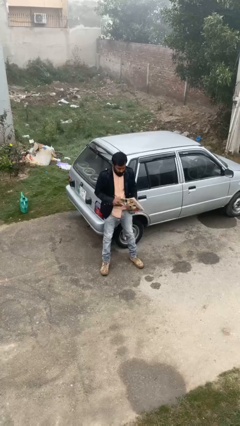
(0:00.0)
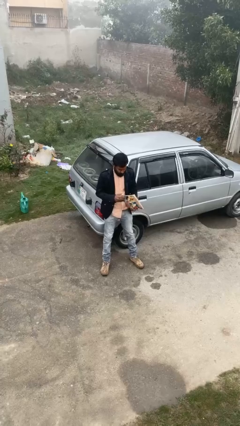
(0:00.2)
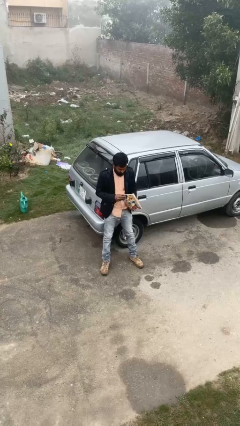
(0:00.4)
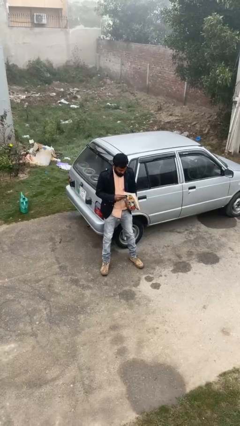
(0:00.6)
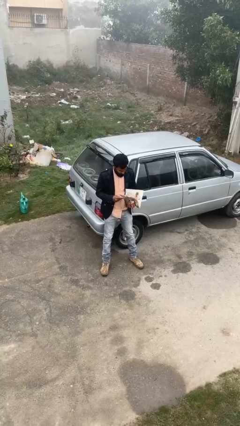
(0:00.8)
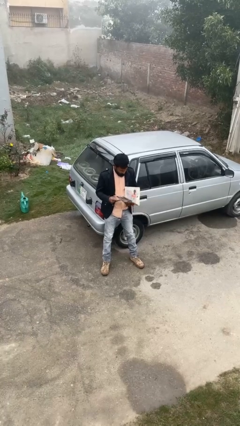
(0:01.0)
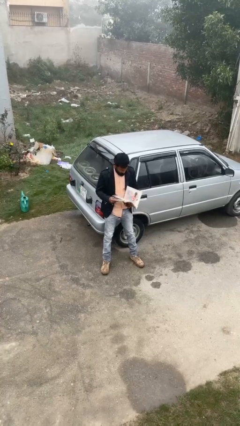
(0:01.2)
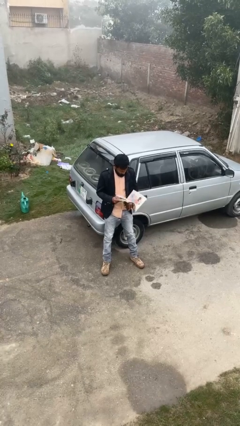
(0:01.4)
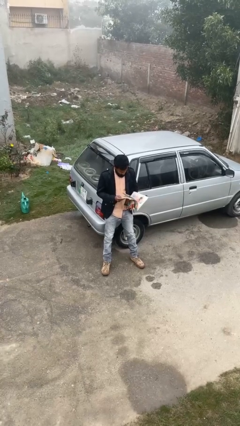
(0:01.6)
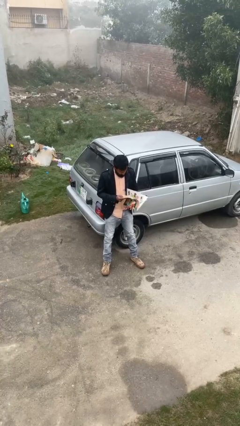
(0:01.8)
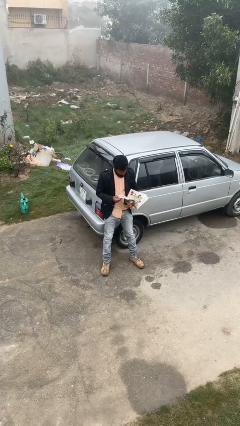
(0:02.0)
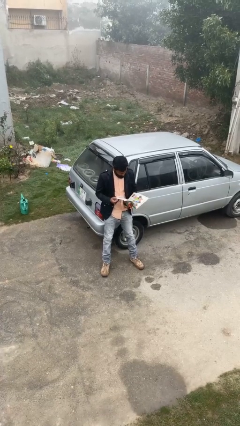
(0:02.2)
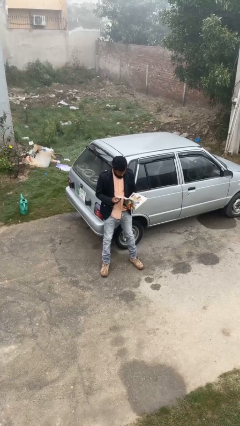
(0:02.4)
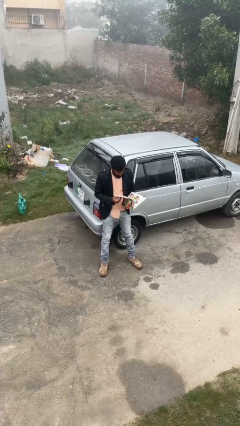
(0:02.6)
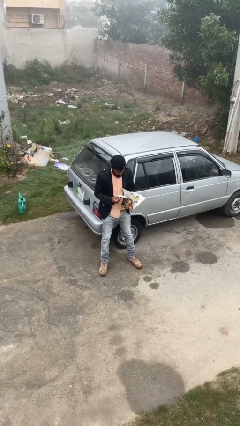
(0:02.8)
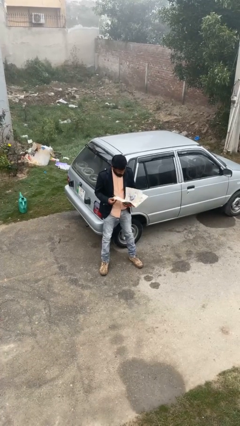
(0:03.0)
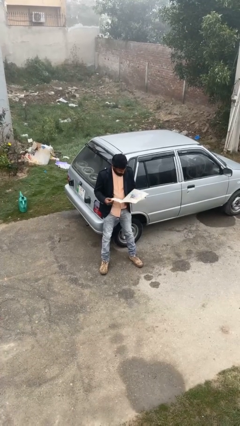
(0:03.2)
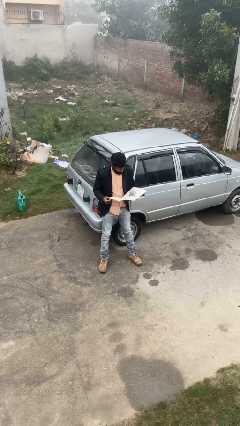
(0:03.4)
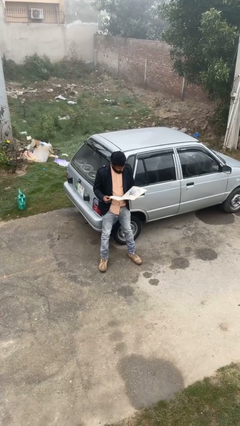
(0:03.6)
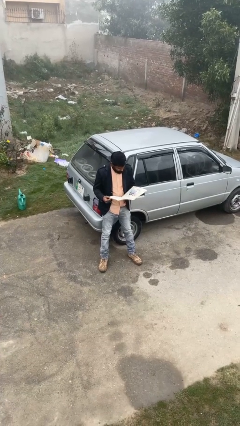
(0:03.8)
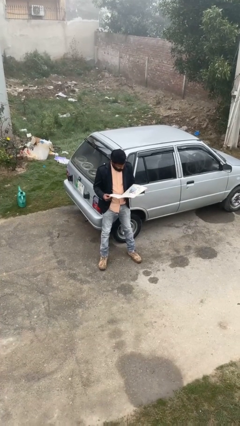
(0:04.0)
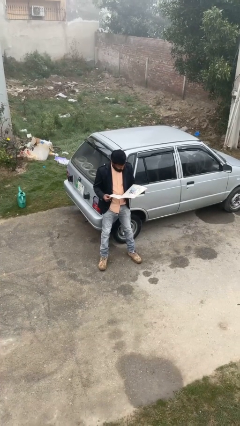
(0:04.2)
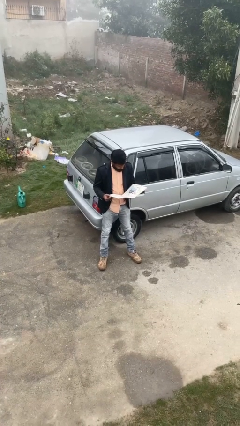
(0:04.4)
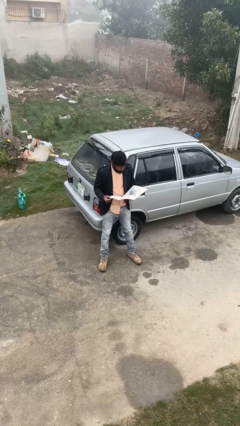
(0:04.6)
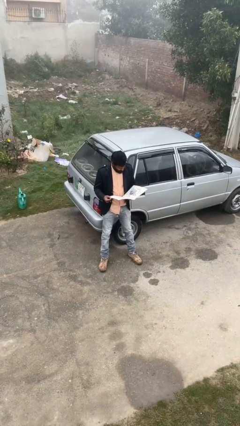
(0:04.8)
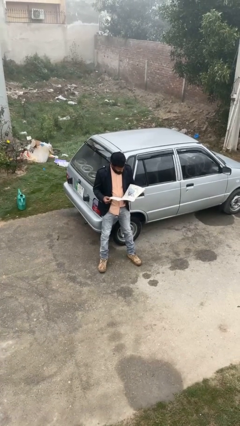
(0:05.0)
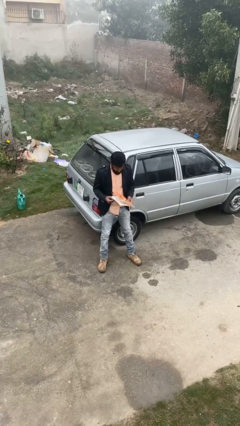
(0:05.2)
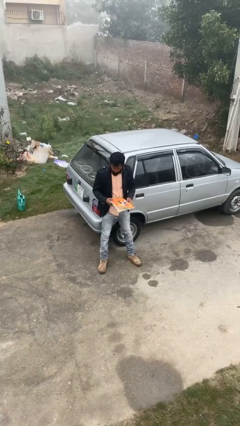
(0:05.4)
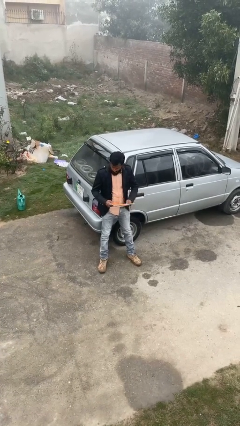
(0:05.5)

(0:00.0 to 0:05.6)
person reads document

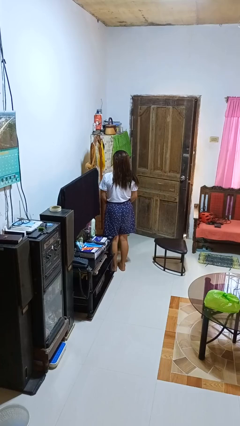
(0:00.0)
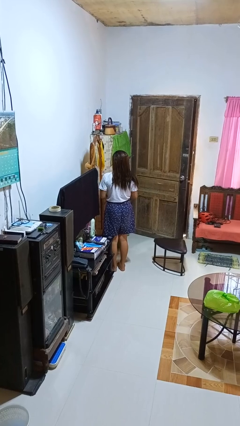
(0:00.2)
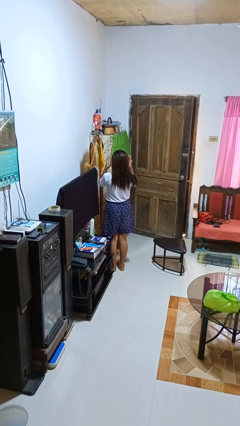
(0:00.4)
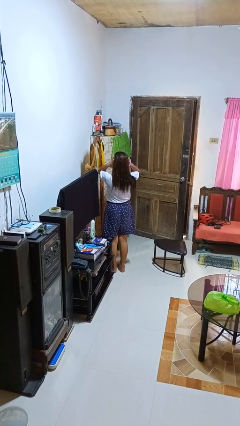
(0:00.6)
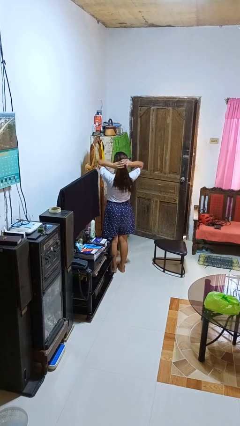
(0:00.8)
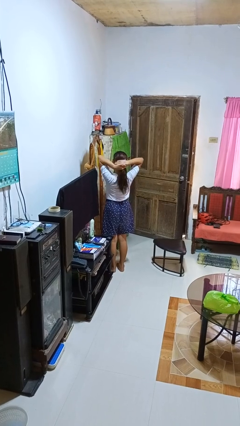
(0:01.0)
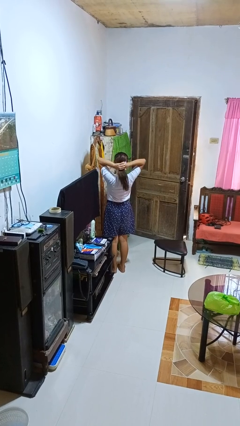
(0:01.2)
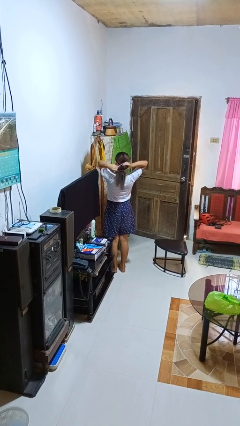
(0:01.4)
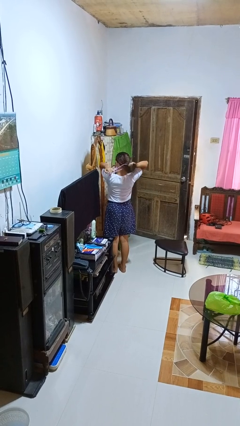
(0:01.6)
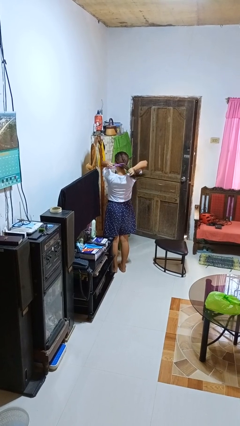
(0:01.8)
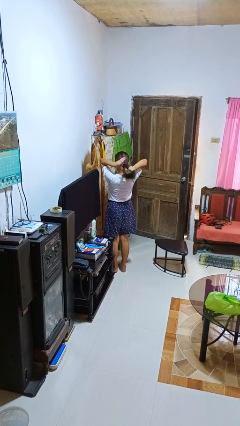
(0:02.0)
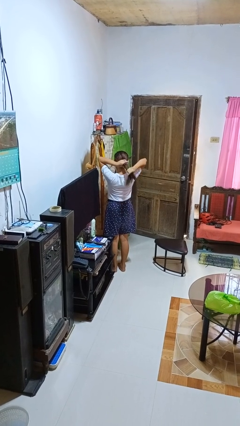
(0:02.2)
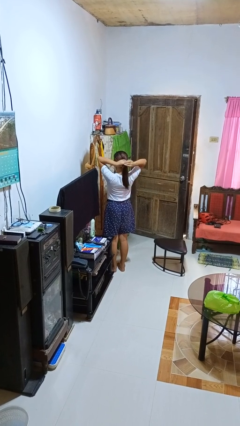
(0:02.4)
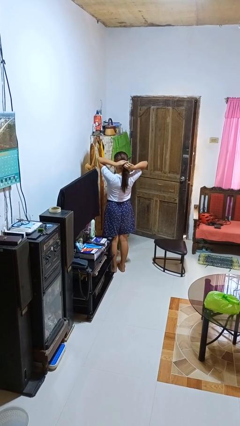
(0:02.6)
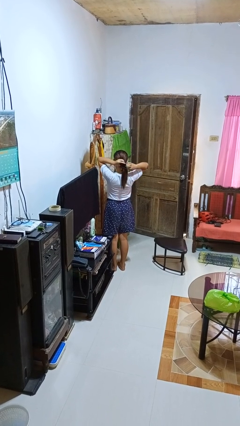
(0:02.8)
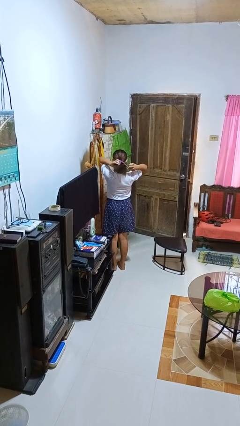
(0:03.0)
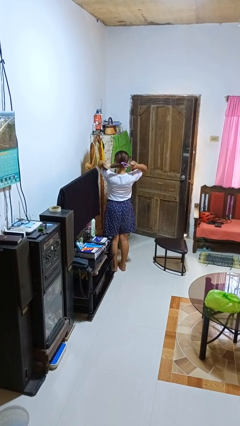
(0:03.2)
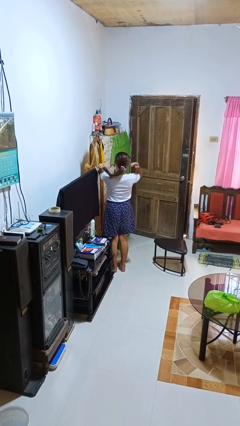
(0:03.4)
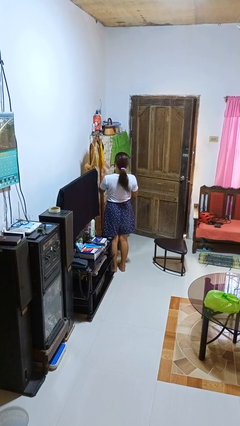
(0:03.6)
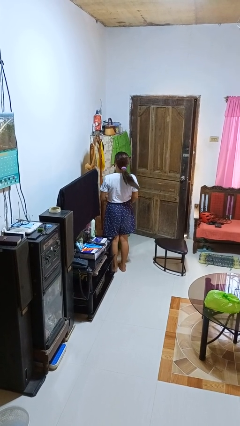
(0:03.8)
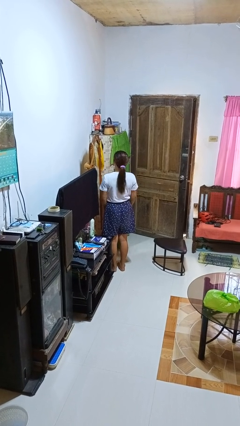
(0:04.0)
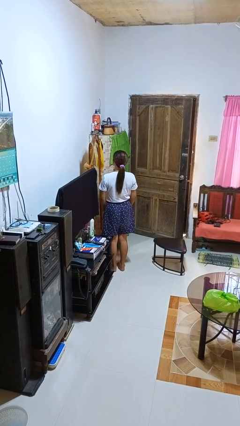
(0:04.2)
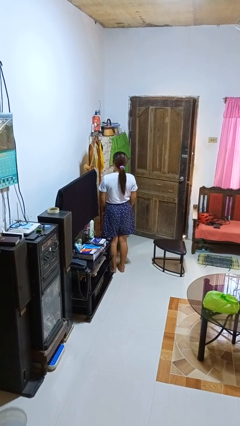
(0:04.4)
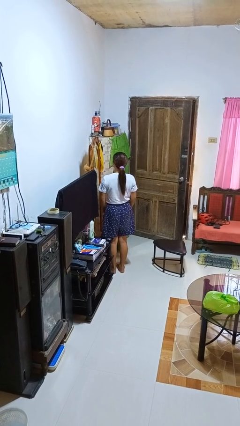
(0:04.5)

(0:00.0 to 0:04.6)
person puts hair in ponytail

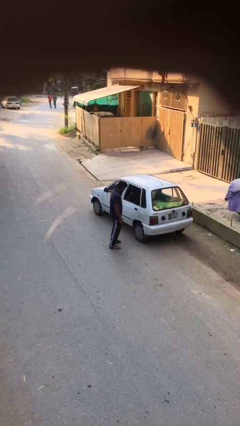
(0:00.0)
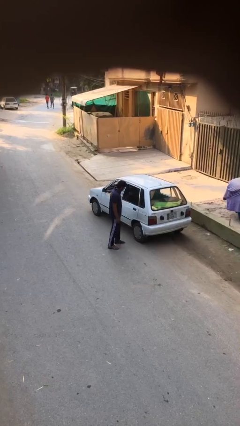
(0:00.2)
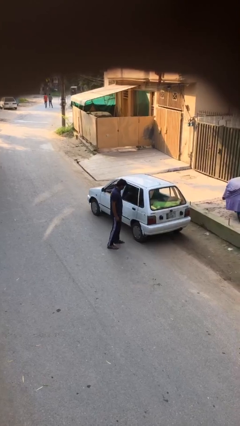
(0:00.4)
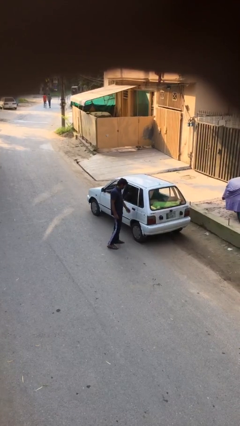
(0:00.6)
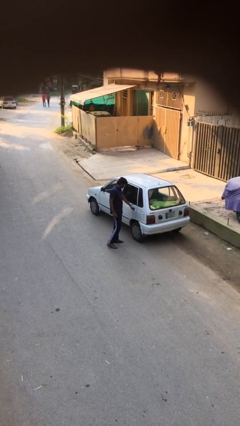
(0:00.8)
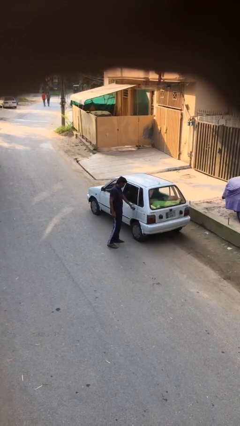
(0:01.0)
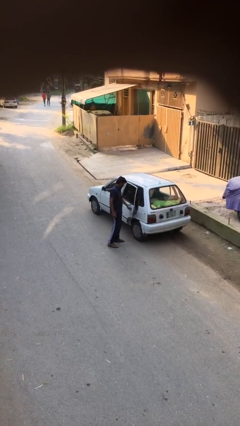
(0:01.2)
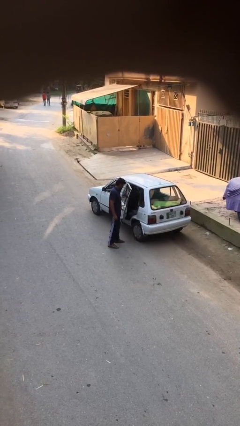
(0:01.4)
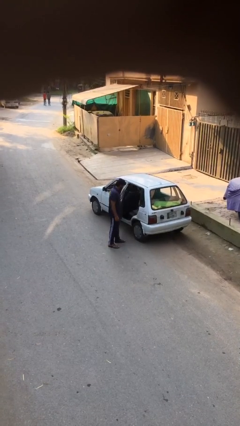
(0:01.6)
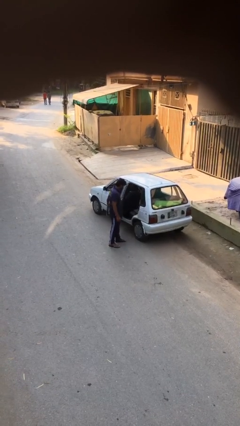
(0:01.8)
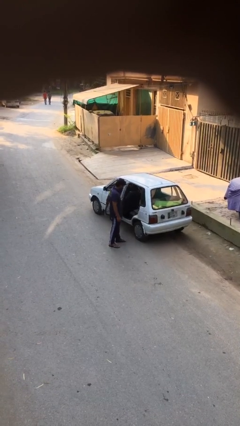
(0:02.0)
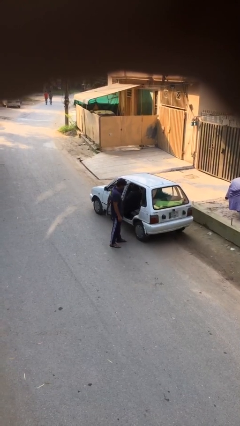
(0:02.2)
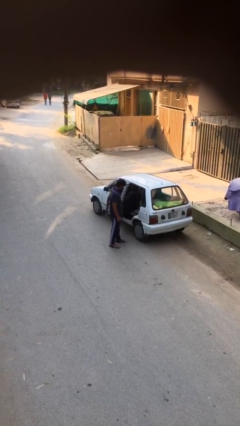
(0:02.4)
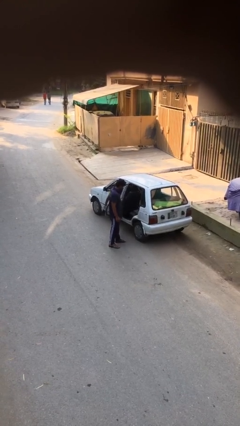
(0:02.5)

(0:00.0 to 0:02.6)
person opens car door

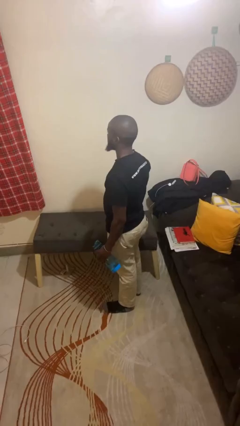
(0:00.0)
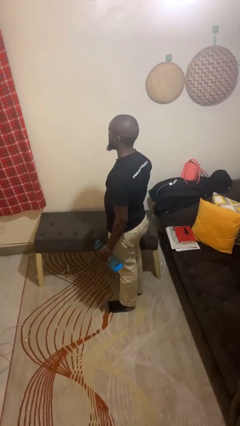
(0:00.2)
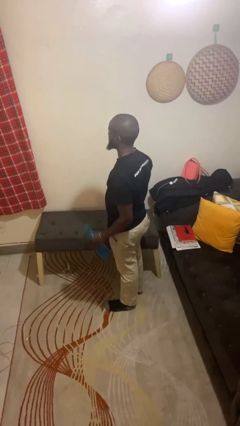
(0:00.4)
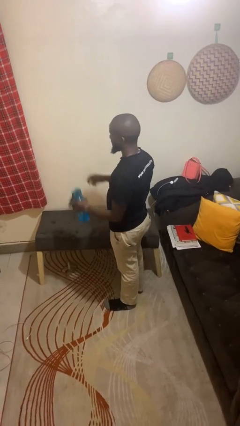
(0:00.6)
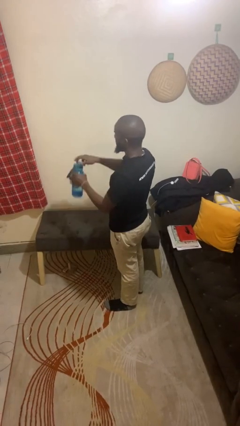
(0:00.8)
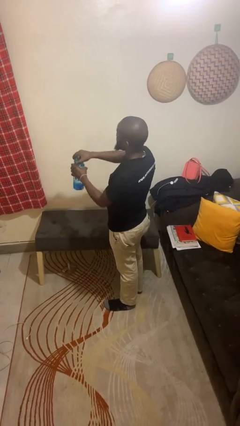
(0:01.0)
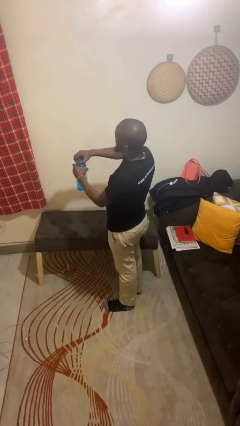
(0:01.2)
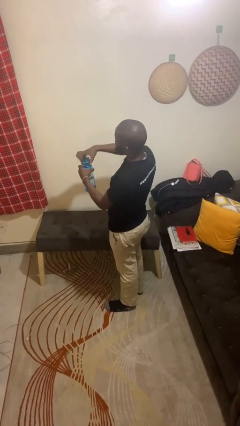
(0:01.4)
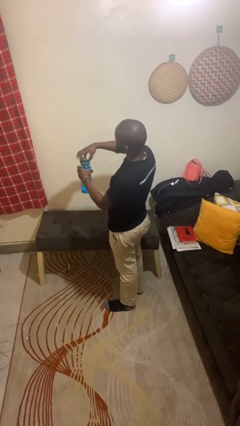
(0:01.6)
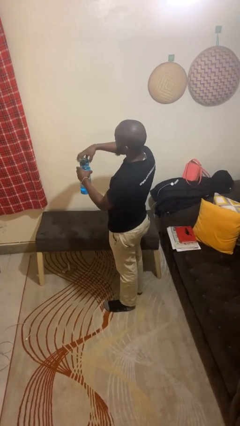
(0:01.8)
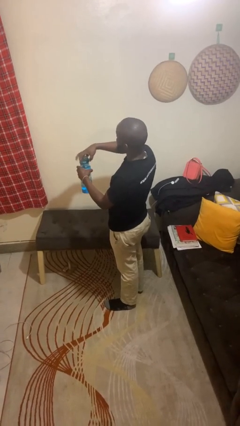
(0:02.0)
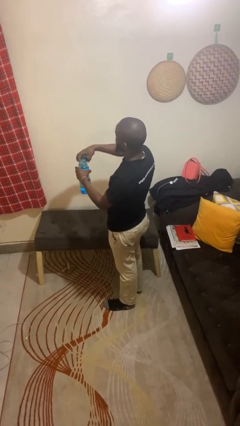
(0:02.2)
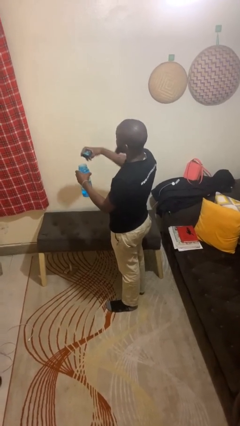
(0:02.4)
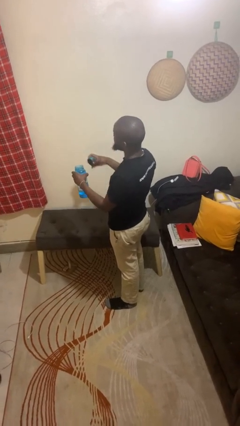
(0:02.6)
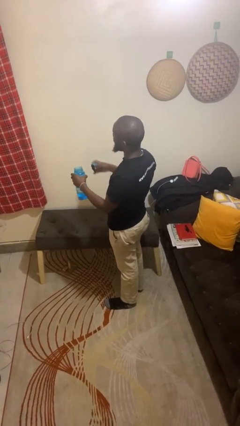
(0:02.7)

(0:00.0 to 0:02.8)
person opens jar

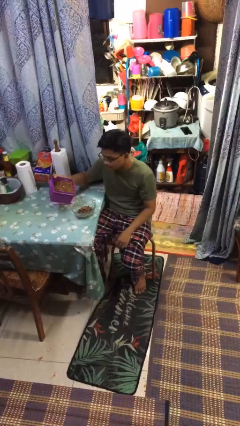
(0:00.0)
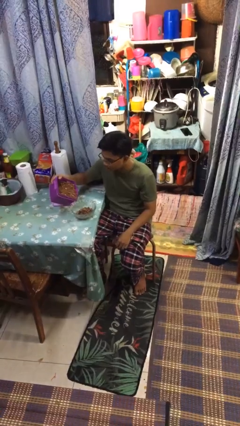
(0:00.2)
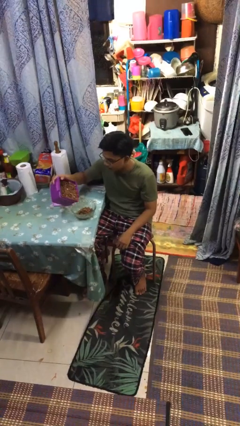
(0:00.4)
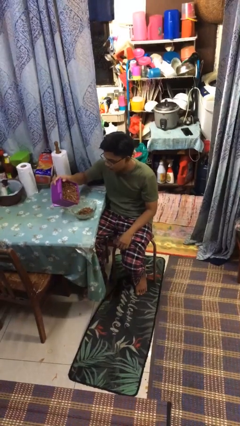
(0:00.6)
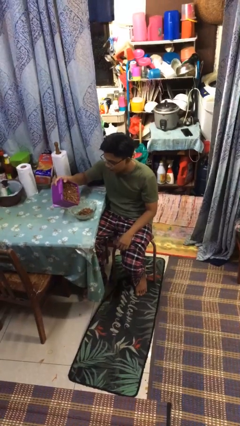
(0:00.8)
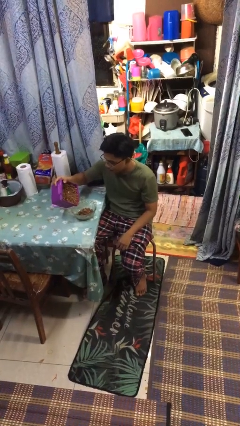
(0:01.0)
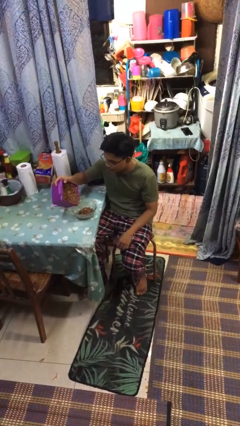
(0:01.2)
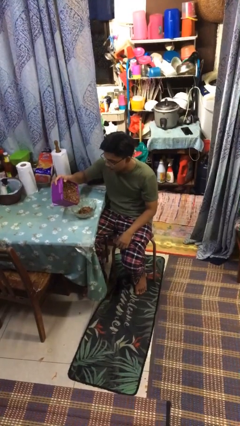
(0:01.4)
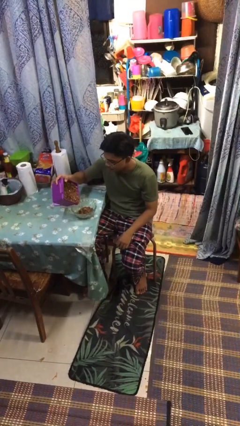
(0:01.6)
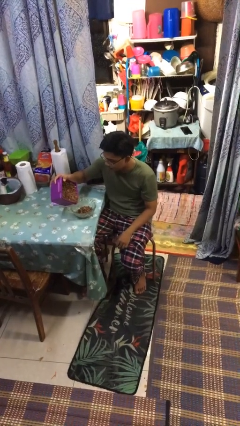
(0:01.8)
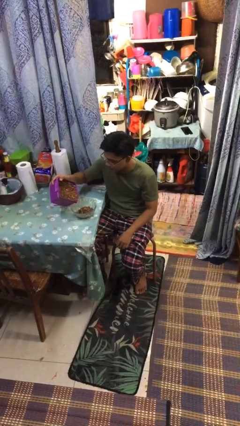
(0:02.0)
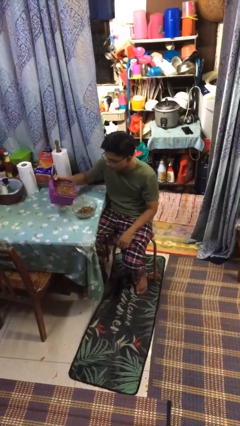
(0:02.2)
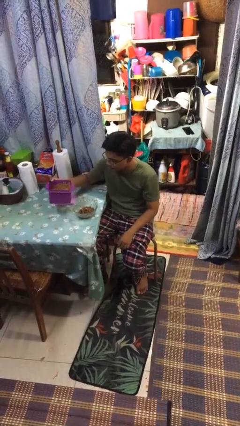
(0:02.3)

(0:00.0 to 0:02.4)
person pours into bowl
